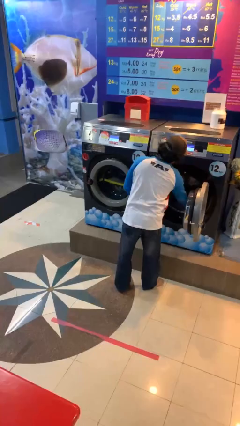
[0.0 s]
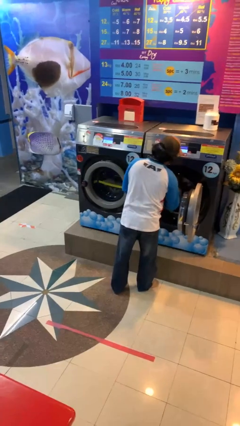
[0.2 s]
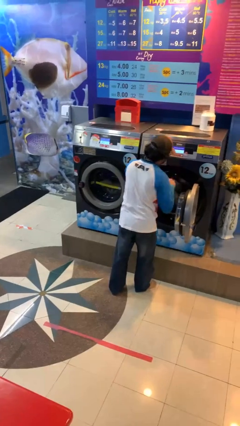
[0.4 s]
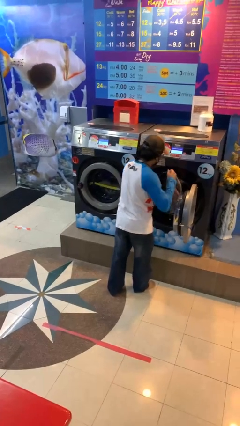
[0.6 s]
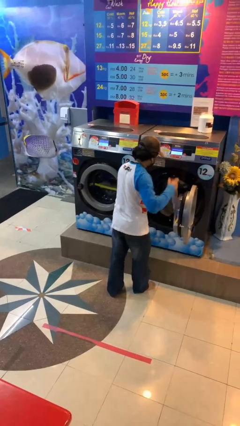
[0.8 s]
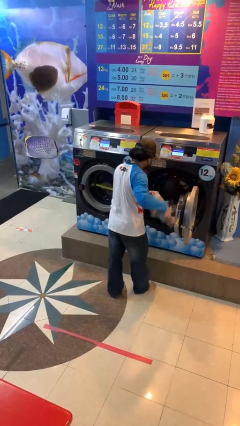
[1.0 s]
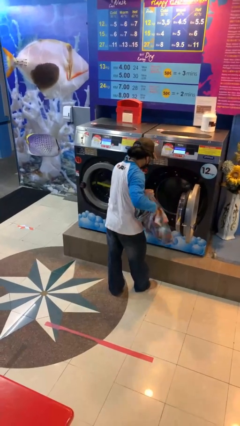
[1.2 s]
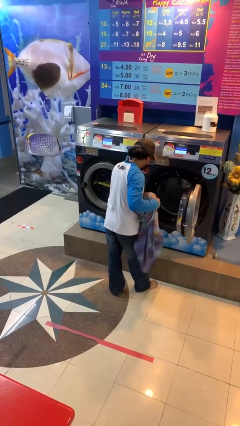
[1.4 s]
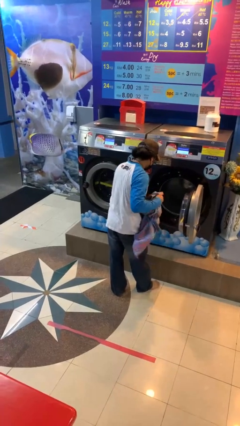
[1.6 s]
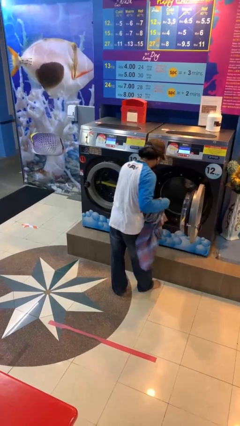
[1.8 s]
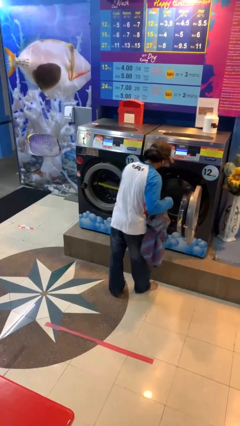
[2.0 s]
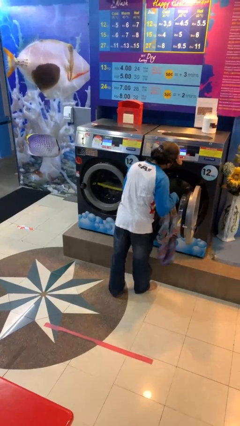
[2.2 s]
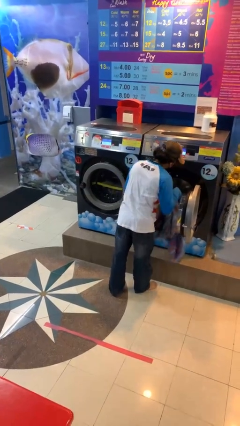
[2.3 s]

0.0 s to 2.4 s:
person unloads clotheswasher

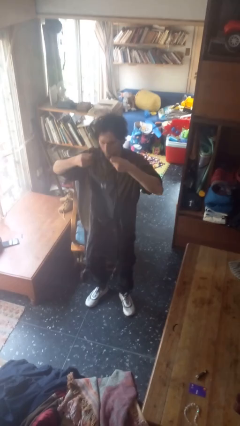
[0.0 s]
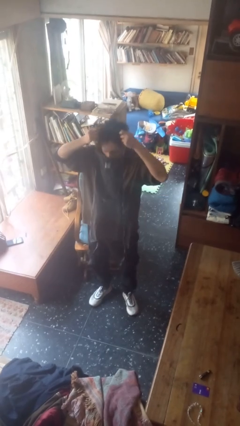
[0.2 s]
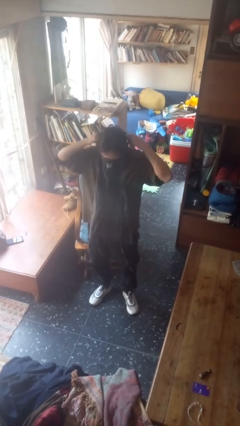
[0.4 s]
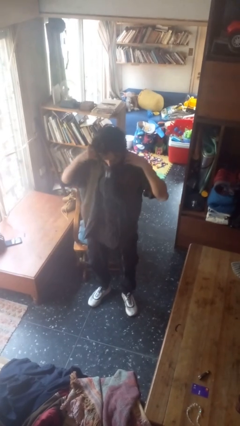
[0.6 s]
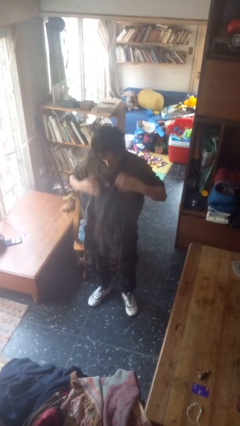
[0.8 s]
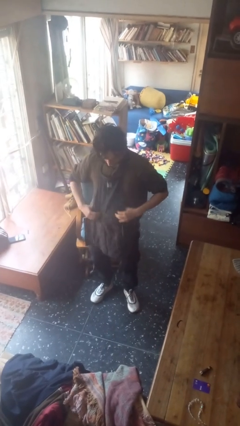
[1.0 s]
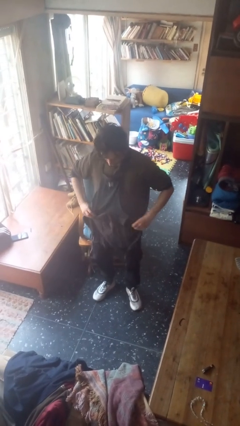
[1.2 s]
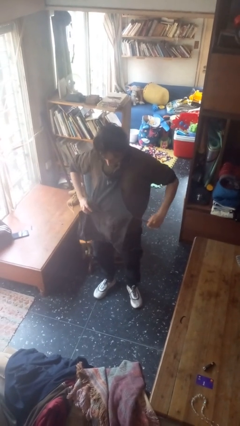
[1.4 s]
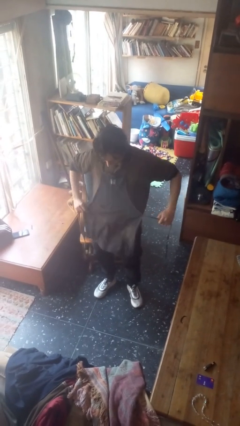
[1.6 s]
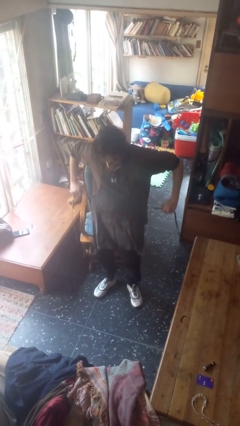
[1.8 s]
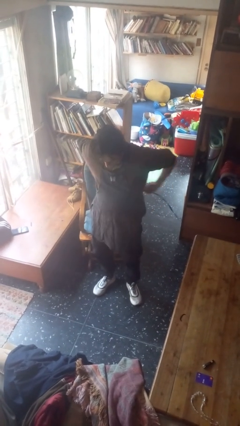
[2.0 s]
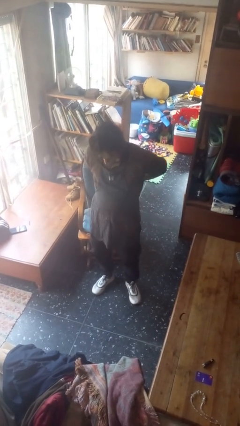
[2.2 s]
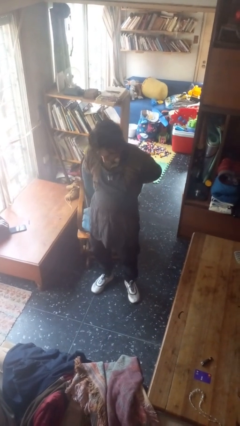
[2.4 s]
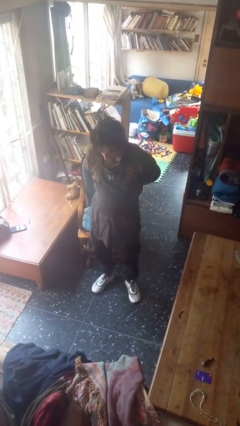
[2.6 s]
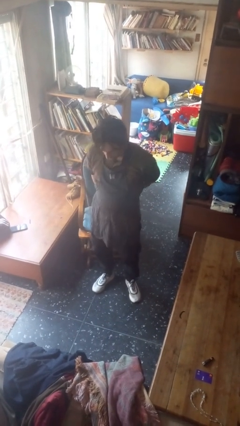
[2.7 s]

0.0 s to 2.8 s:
person puts on apron

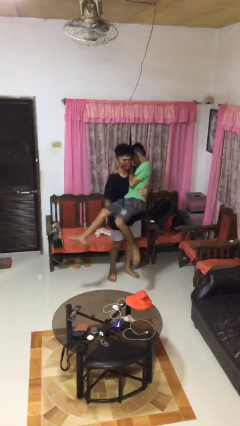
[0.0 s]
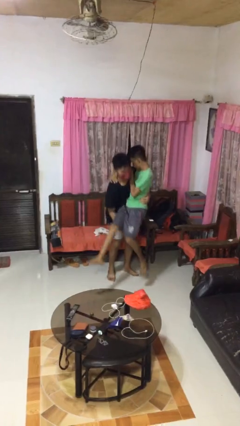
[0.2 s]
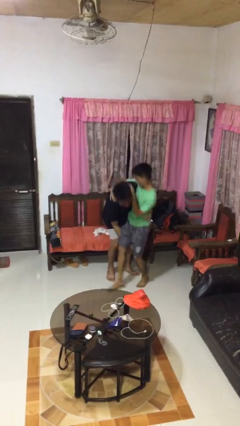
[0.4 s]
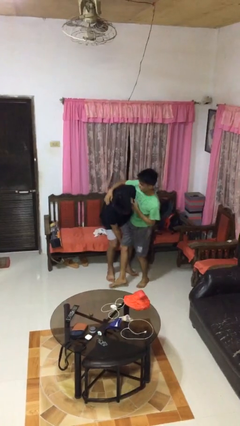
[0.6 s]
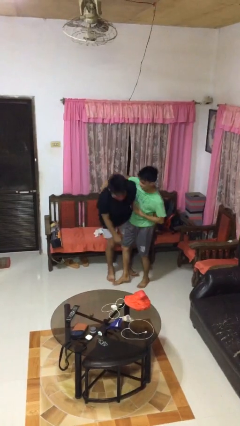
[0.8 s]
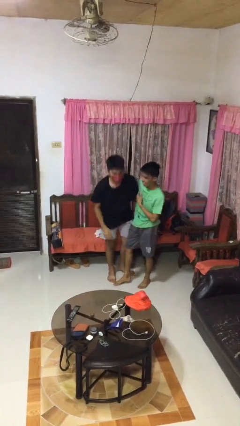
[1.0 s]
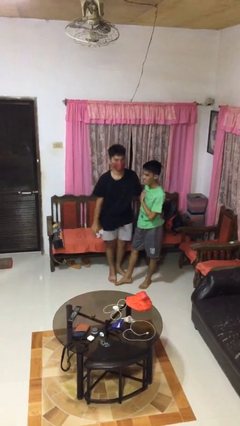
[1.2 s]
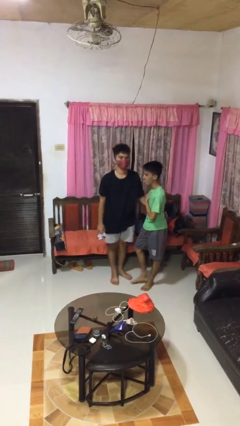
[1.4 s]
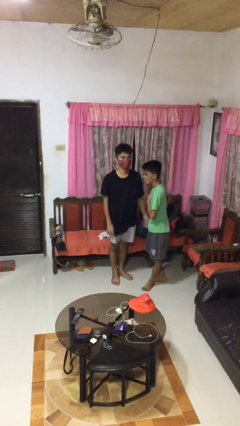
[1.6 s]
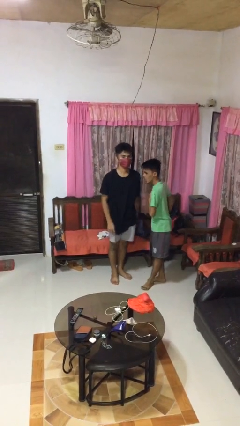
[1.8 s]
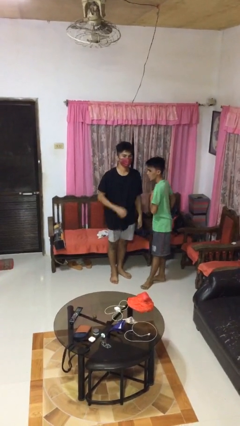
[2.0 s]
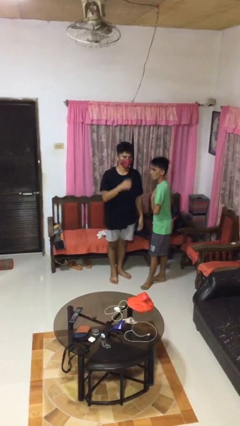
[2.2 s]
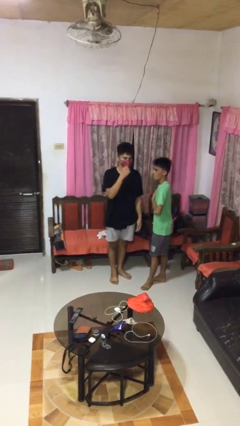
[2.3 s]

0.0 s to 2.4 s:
person puts down person

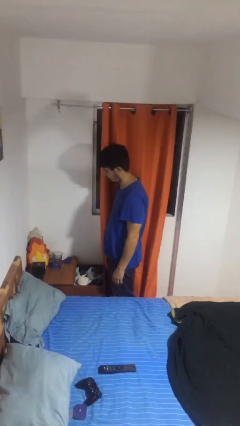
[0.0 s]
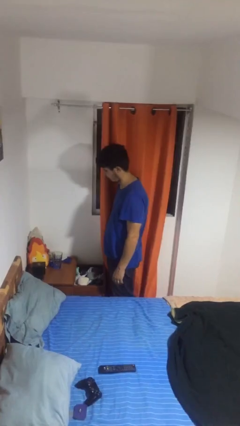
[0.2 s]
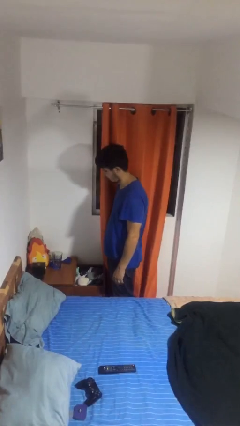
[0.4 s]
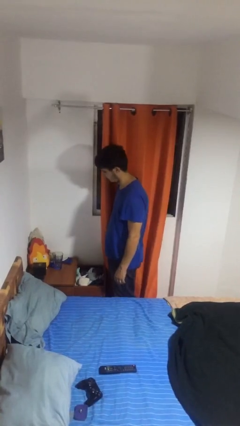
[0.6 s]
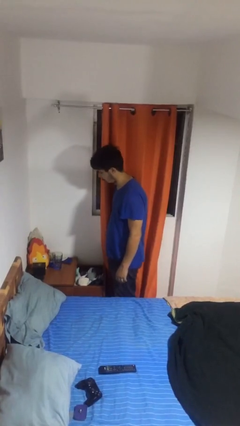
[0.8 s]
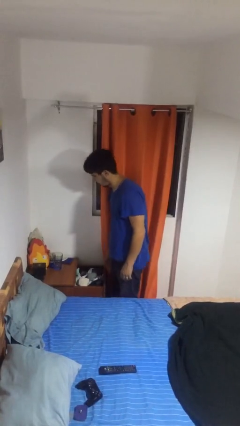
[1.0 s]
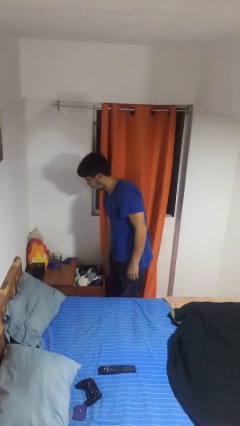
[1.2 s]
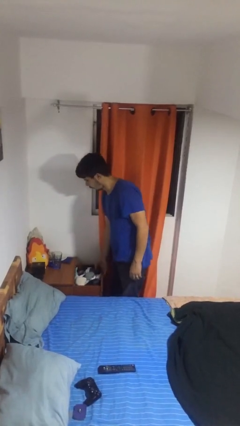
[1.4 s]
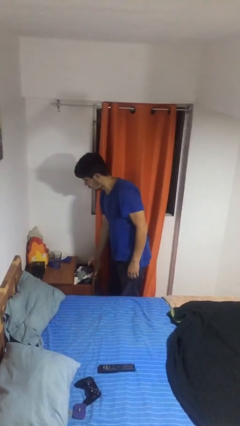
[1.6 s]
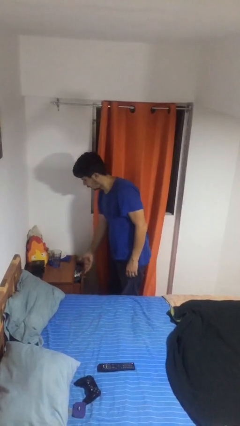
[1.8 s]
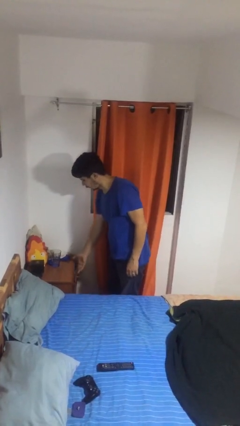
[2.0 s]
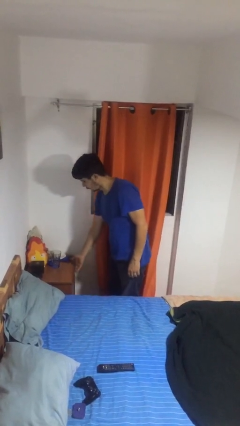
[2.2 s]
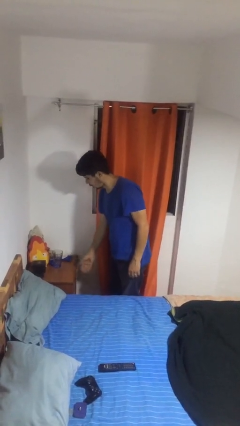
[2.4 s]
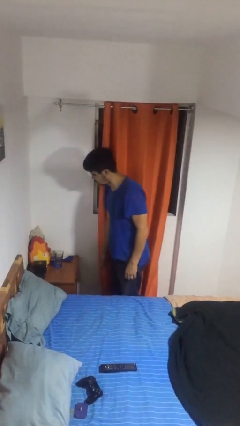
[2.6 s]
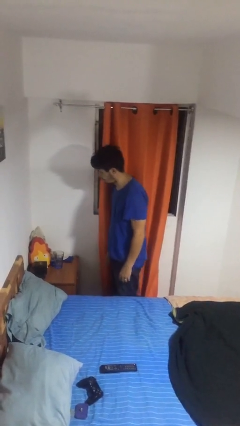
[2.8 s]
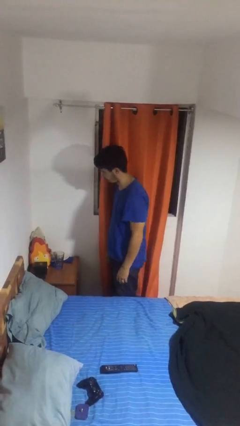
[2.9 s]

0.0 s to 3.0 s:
person closes dresser drawer

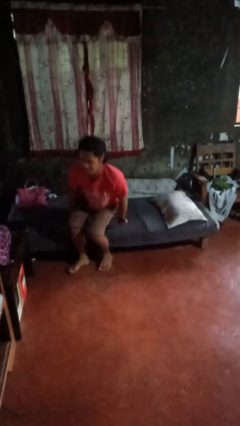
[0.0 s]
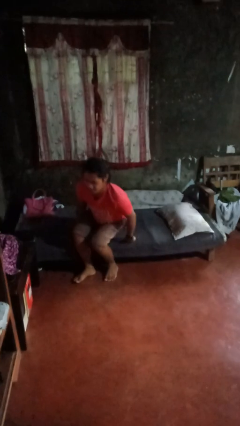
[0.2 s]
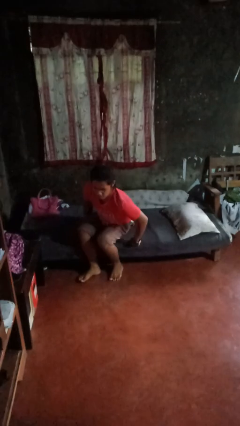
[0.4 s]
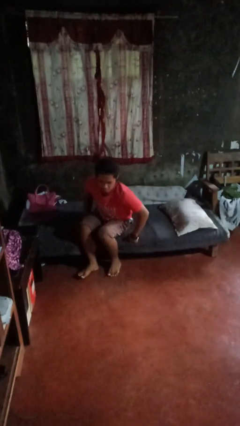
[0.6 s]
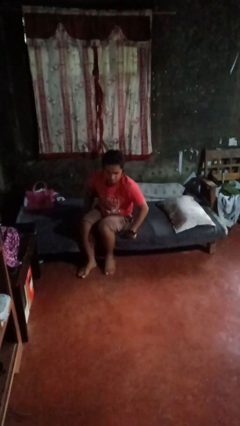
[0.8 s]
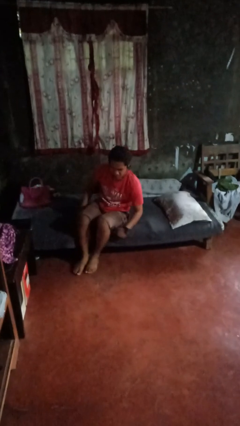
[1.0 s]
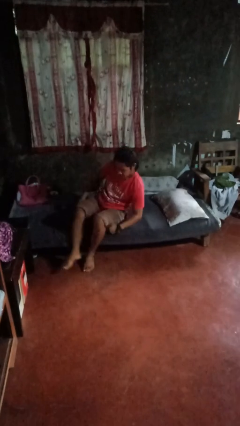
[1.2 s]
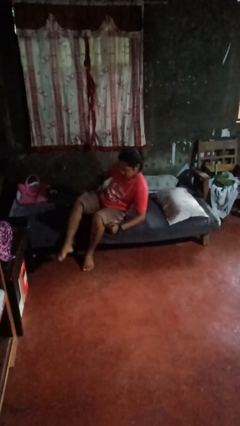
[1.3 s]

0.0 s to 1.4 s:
person stands up from floor

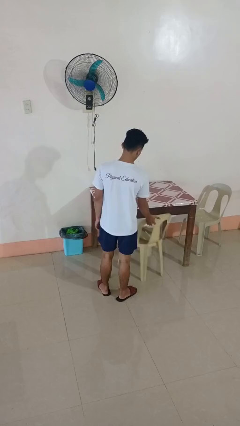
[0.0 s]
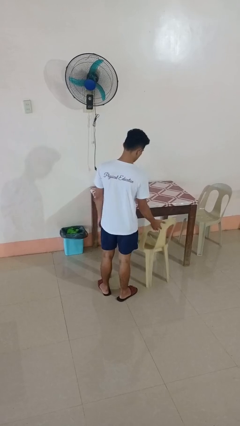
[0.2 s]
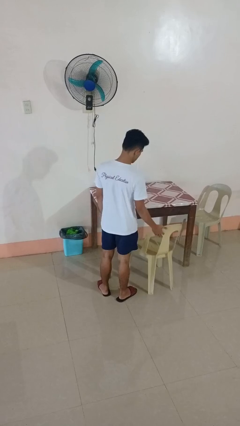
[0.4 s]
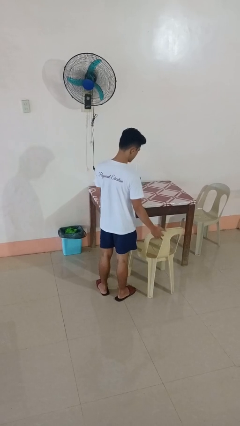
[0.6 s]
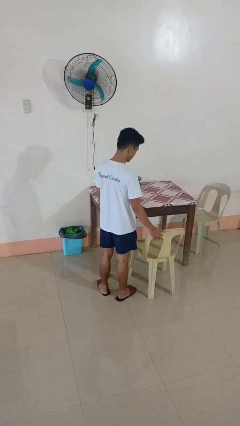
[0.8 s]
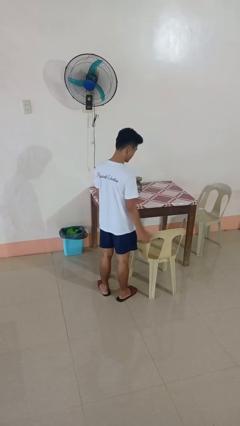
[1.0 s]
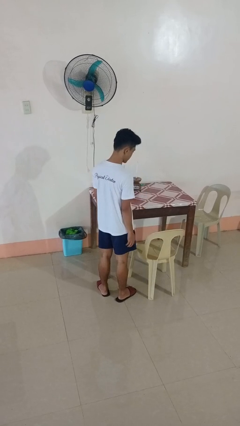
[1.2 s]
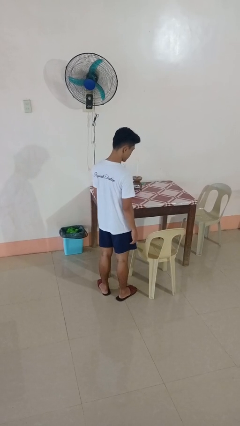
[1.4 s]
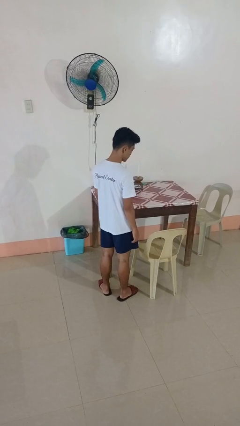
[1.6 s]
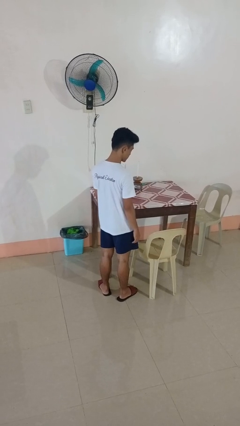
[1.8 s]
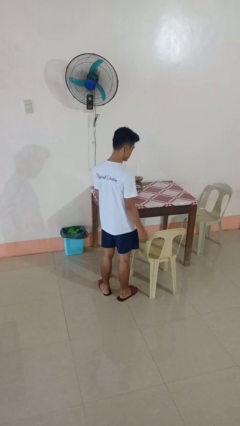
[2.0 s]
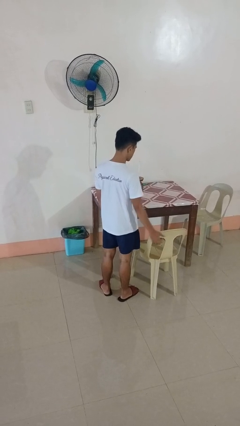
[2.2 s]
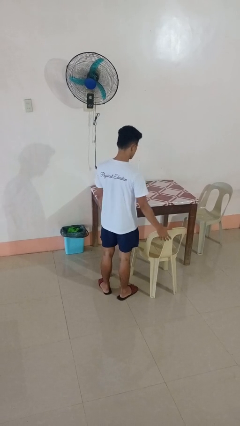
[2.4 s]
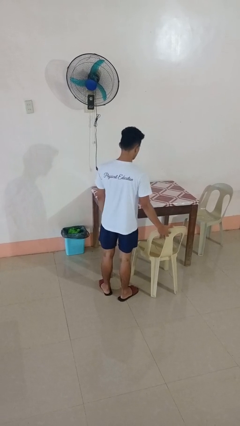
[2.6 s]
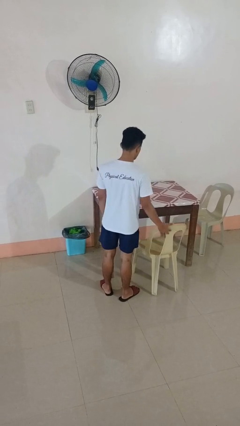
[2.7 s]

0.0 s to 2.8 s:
person pulls out chair

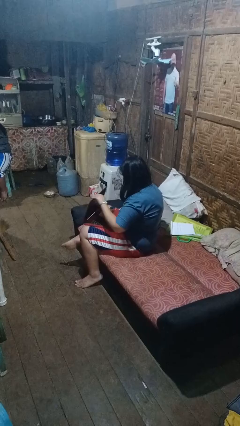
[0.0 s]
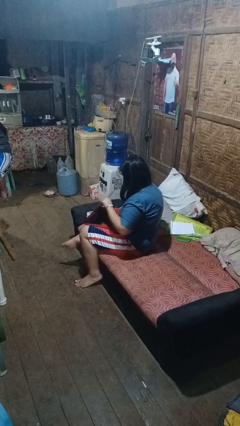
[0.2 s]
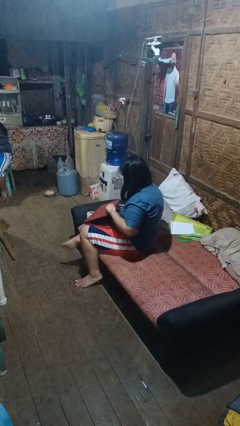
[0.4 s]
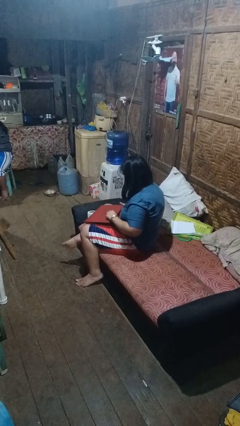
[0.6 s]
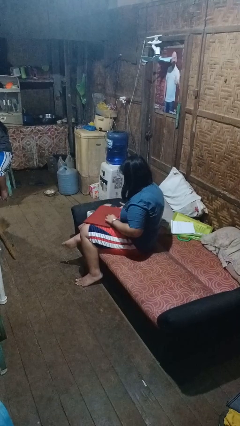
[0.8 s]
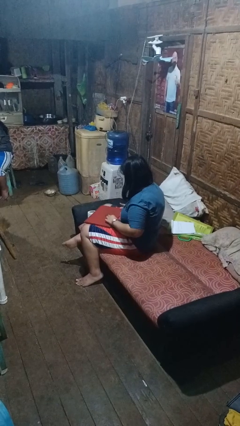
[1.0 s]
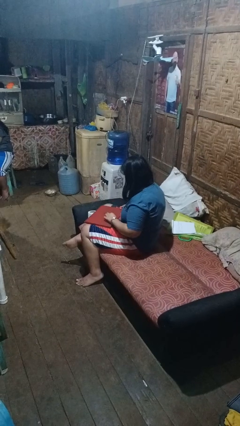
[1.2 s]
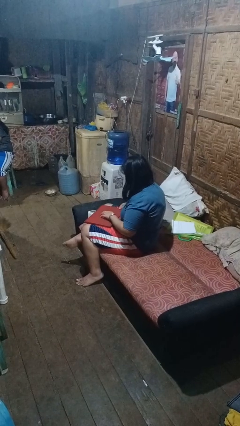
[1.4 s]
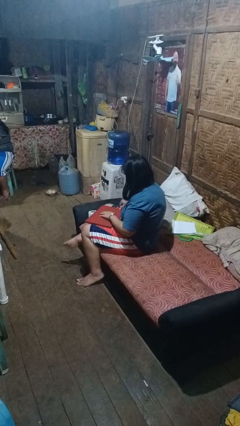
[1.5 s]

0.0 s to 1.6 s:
person closes laptop

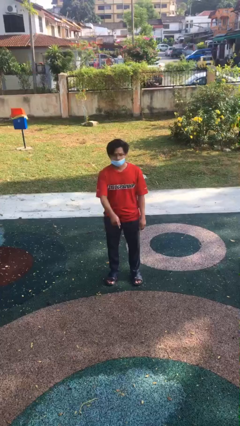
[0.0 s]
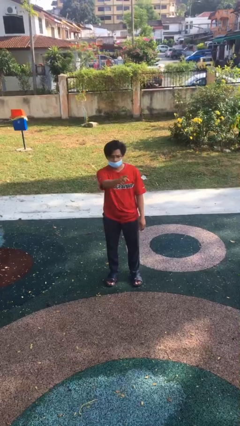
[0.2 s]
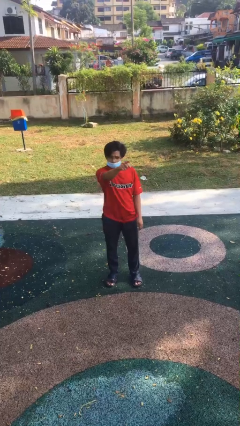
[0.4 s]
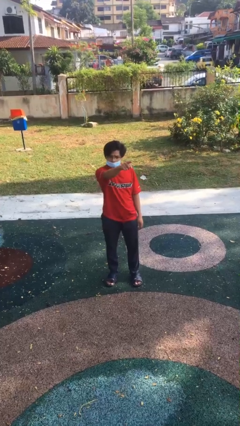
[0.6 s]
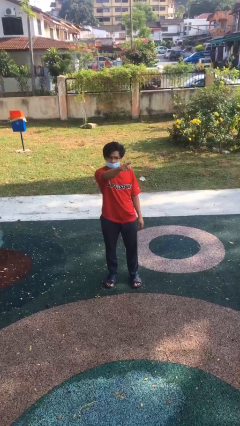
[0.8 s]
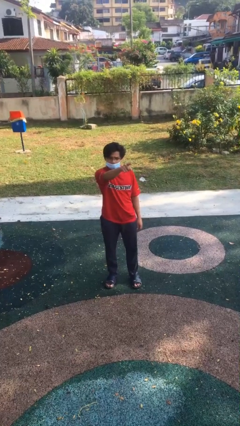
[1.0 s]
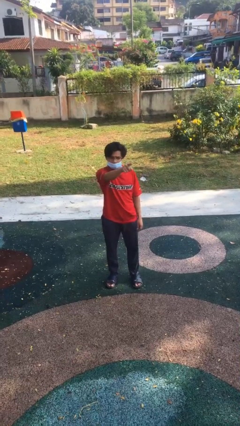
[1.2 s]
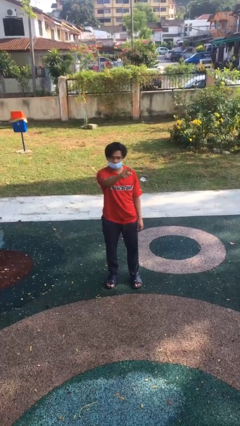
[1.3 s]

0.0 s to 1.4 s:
person points at person
